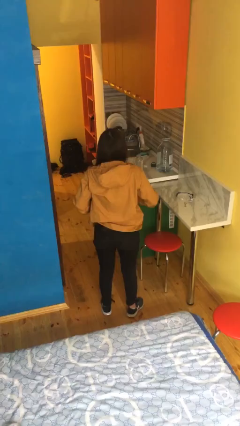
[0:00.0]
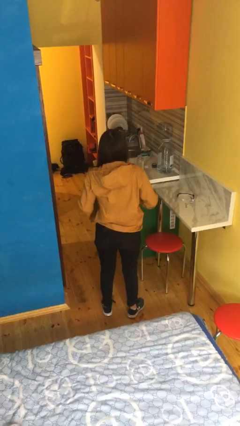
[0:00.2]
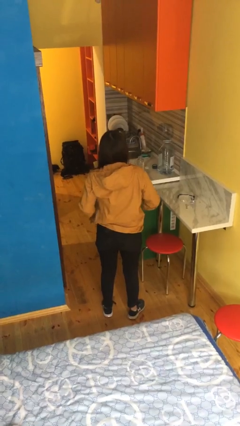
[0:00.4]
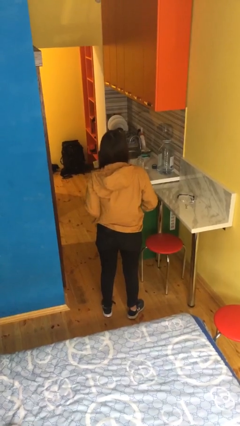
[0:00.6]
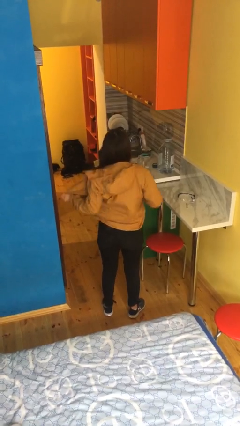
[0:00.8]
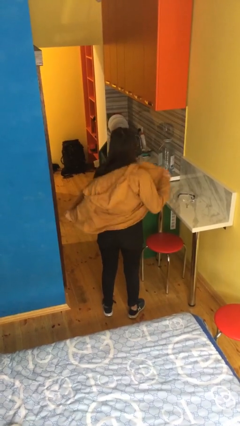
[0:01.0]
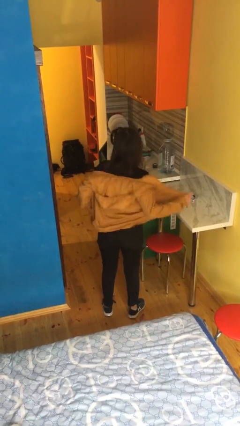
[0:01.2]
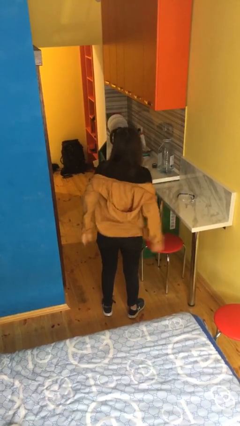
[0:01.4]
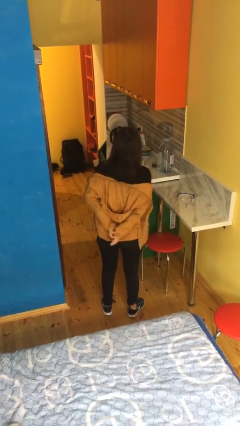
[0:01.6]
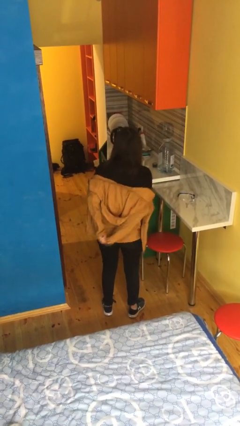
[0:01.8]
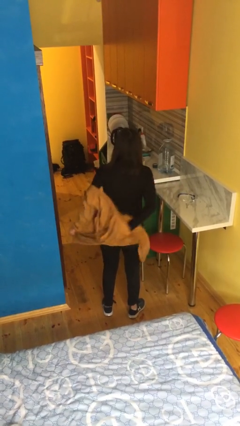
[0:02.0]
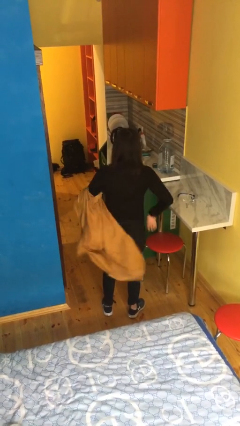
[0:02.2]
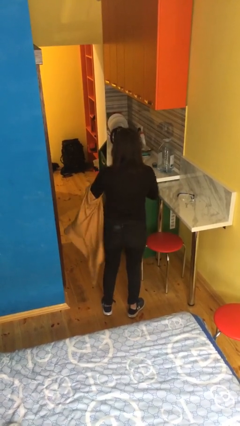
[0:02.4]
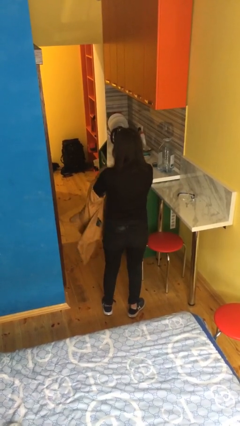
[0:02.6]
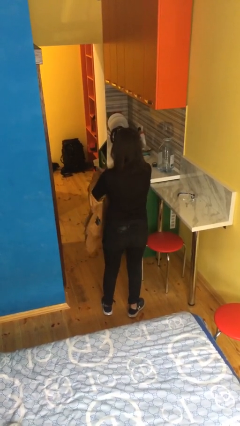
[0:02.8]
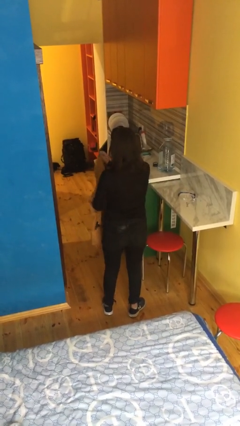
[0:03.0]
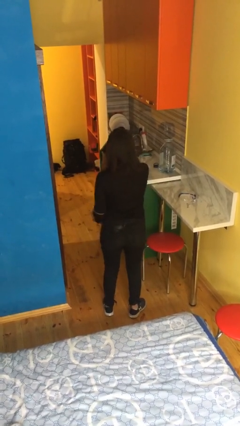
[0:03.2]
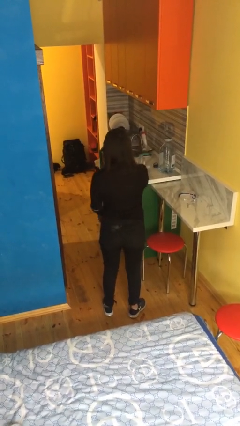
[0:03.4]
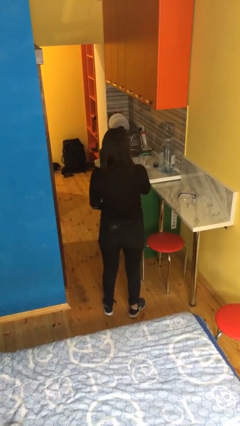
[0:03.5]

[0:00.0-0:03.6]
person takes off jacket

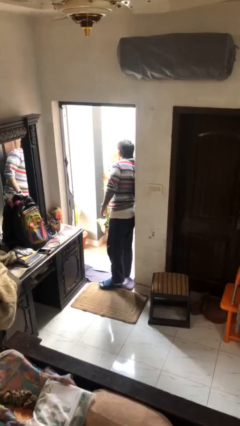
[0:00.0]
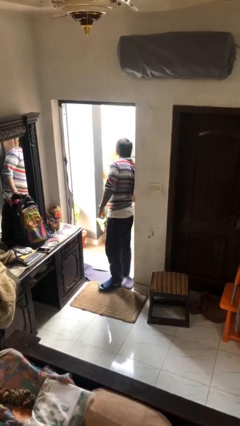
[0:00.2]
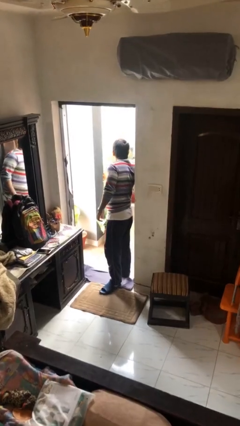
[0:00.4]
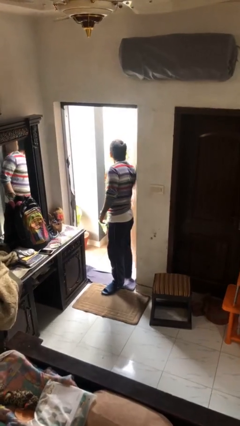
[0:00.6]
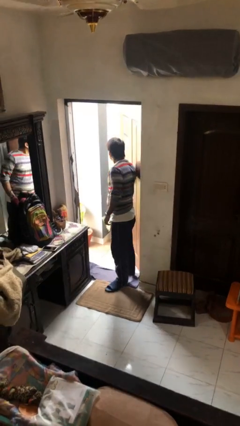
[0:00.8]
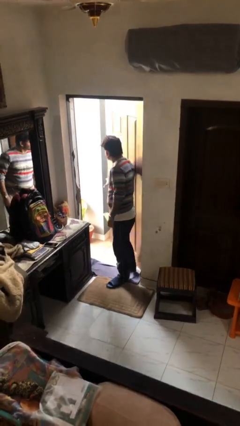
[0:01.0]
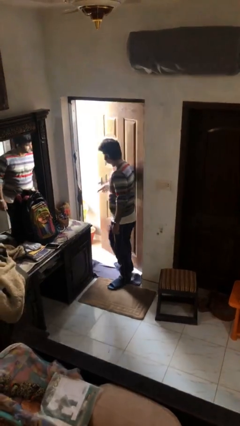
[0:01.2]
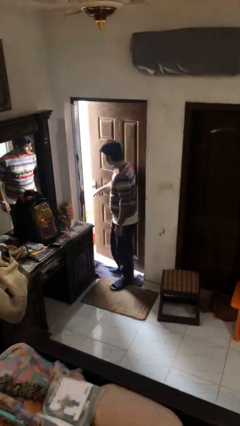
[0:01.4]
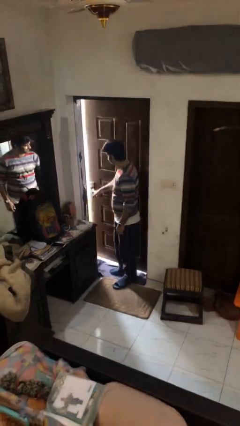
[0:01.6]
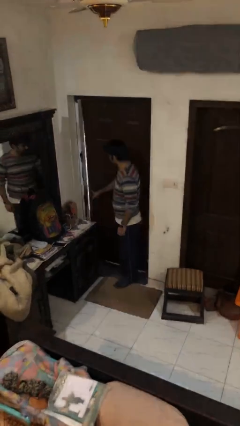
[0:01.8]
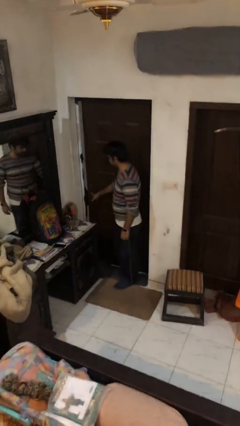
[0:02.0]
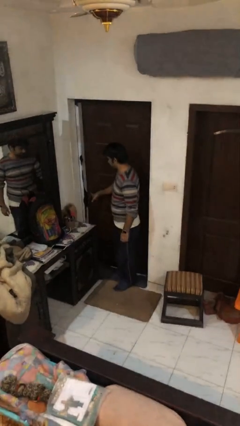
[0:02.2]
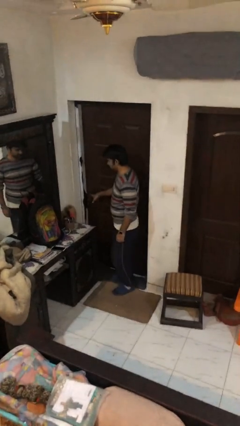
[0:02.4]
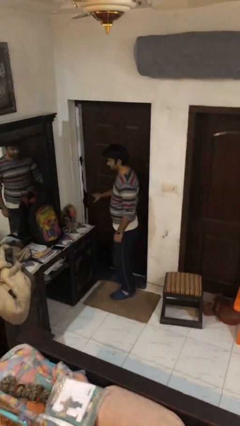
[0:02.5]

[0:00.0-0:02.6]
person closes facility door

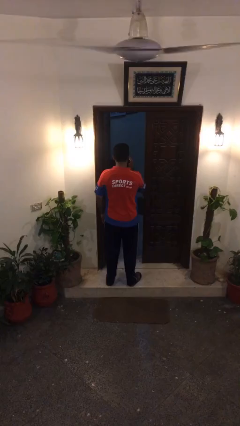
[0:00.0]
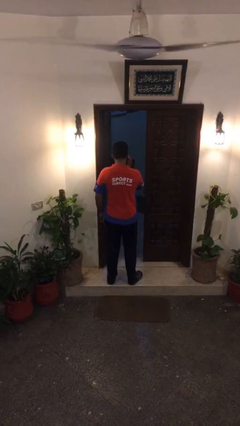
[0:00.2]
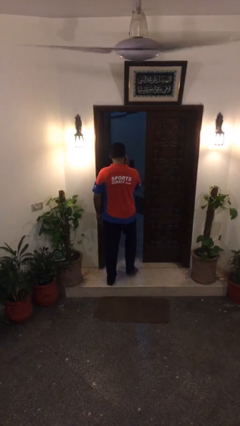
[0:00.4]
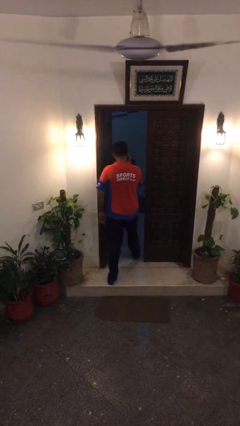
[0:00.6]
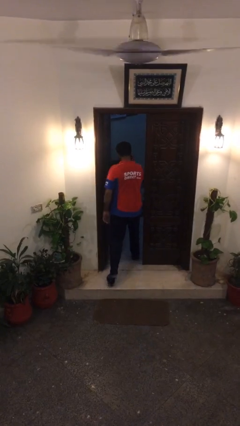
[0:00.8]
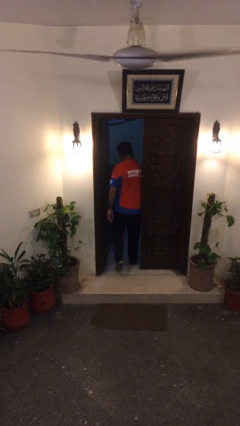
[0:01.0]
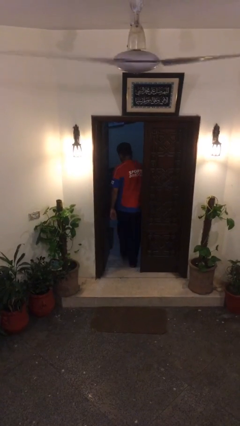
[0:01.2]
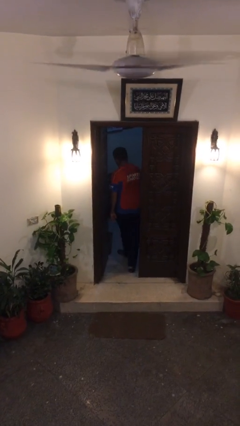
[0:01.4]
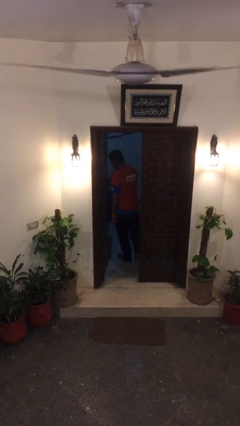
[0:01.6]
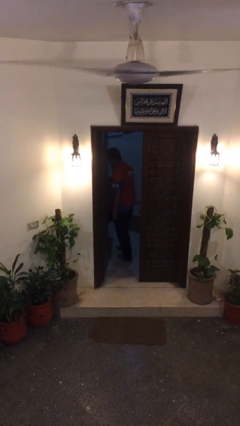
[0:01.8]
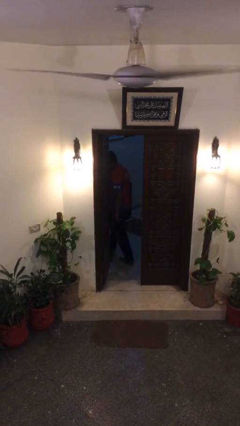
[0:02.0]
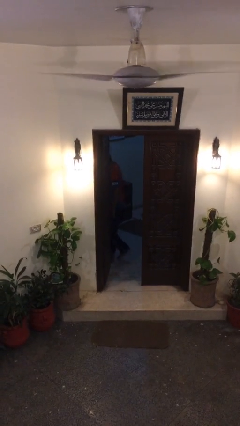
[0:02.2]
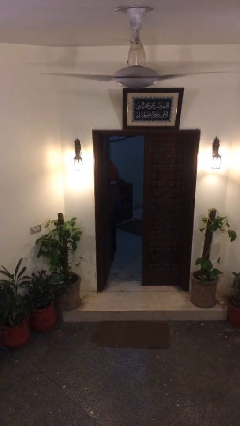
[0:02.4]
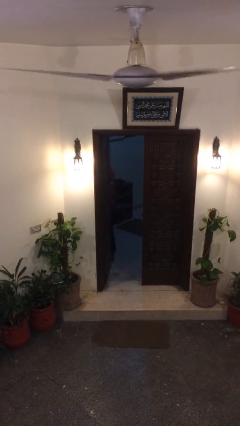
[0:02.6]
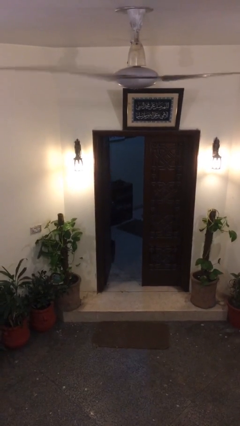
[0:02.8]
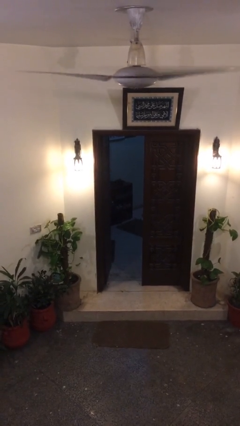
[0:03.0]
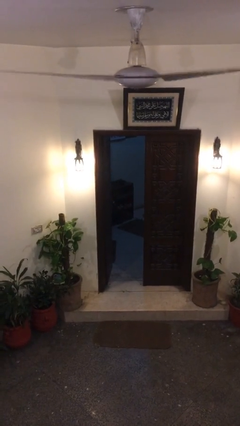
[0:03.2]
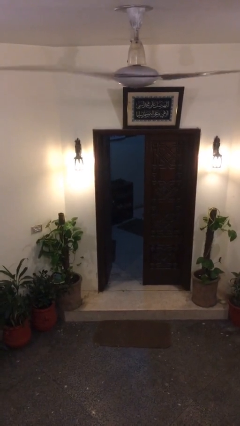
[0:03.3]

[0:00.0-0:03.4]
person exits scene through structure

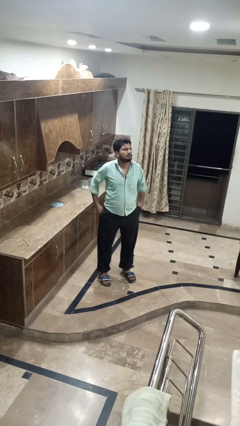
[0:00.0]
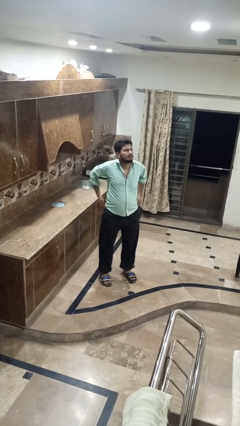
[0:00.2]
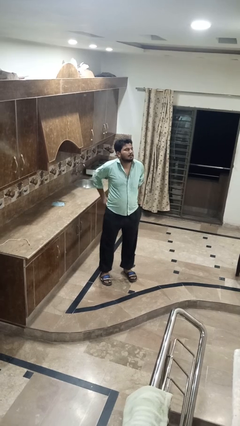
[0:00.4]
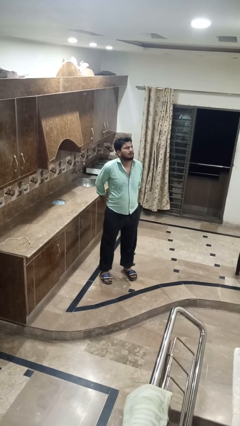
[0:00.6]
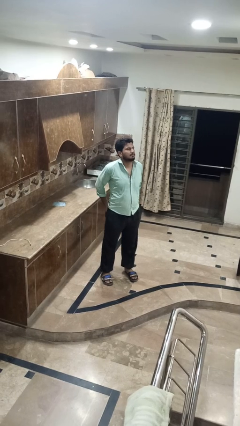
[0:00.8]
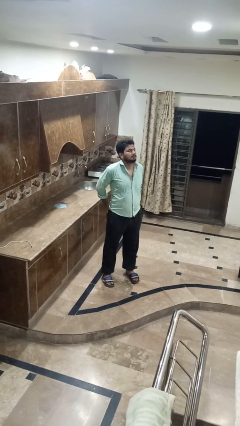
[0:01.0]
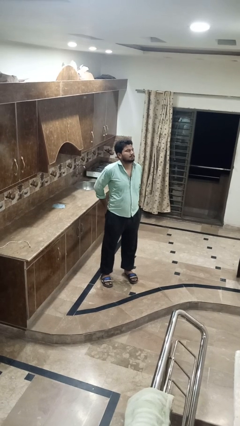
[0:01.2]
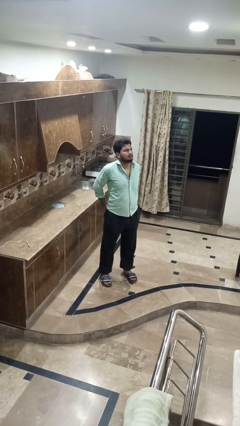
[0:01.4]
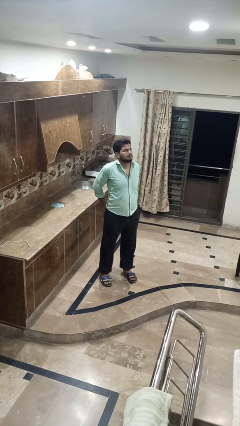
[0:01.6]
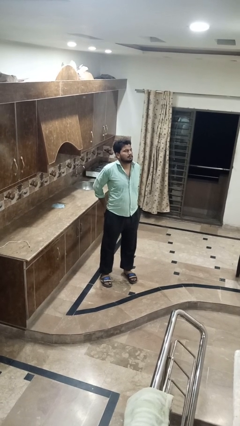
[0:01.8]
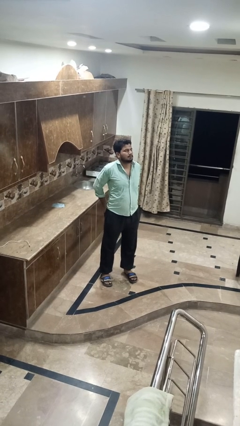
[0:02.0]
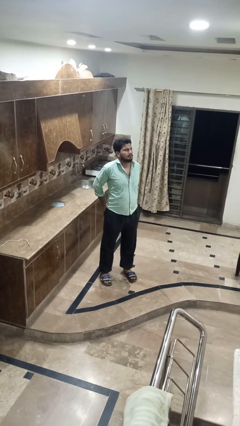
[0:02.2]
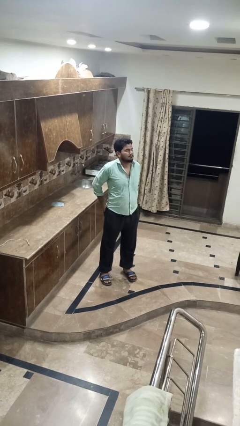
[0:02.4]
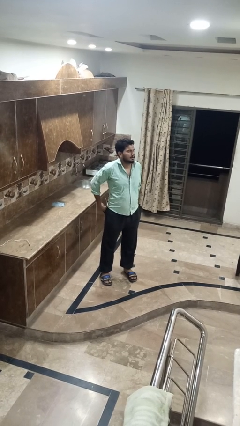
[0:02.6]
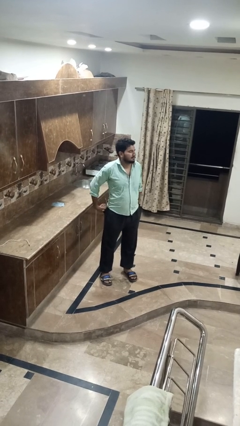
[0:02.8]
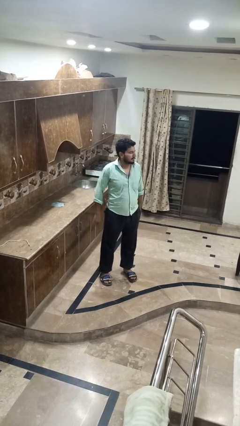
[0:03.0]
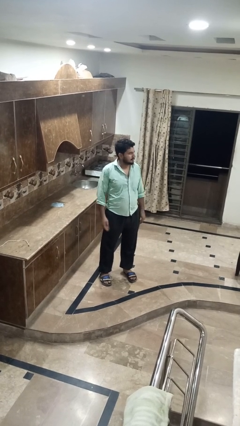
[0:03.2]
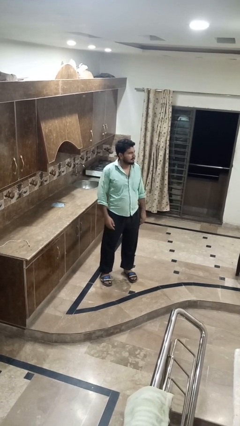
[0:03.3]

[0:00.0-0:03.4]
person puts hands in back pockets

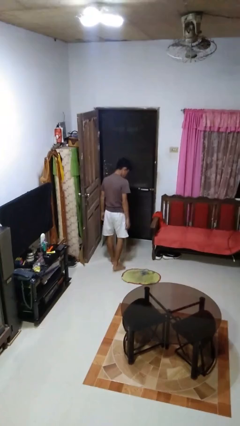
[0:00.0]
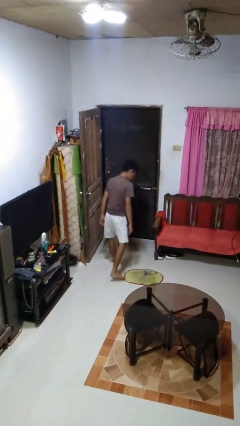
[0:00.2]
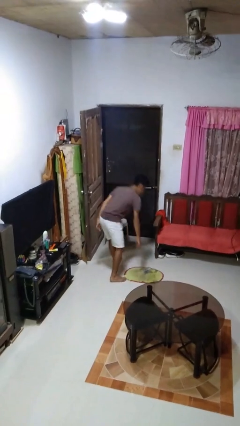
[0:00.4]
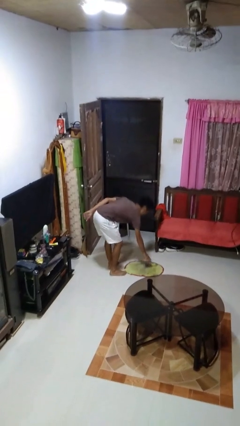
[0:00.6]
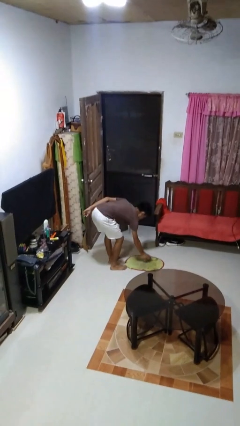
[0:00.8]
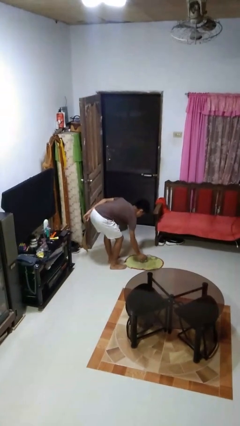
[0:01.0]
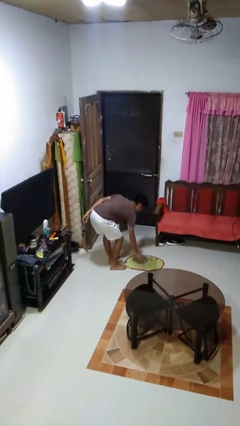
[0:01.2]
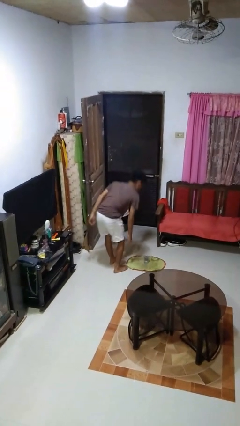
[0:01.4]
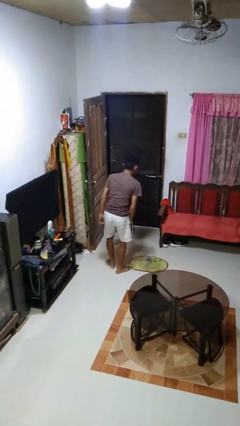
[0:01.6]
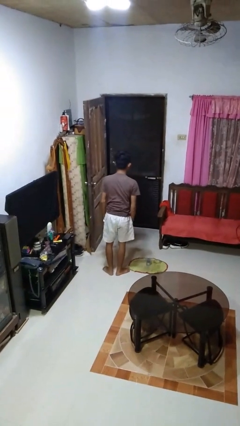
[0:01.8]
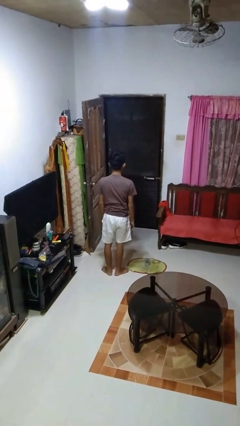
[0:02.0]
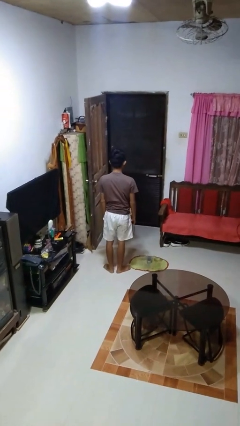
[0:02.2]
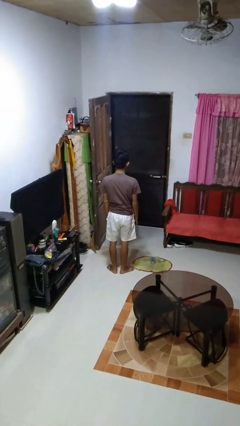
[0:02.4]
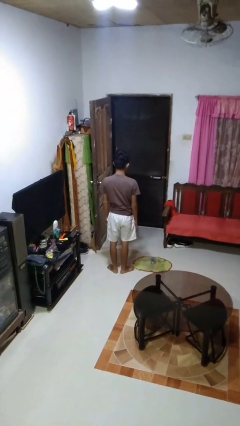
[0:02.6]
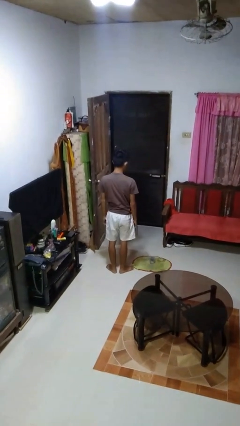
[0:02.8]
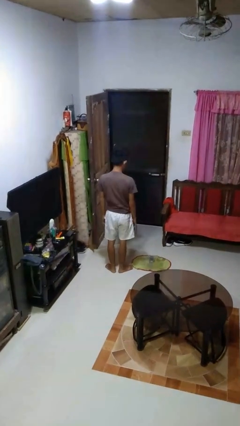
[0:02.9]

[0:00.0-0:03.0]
person sets upright glass

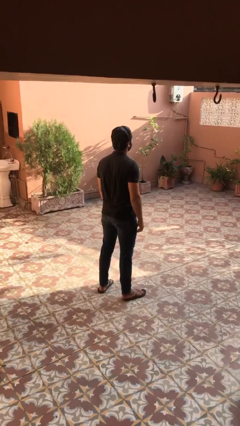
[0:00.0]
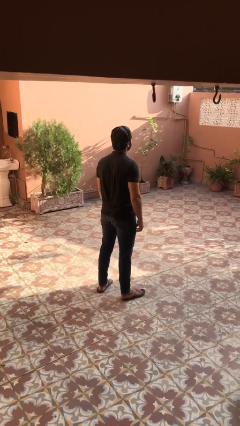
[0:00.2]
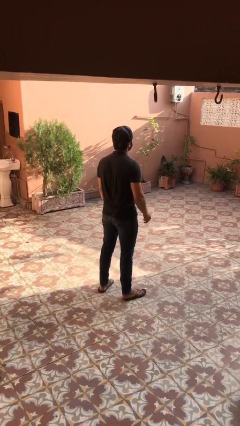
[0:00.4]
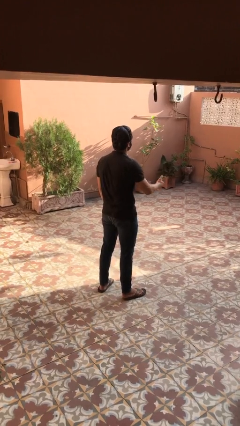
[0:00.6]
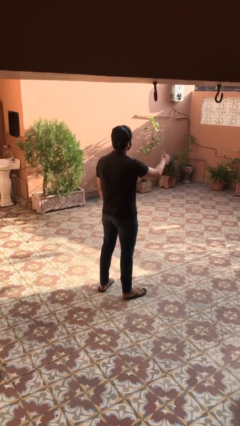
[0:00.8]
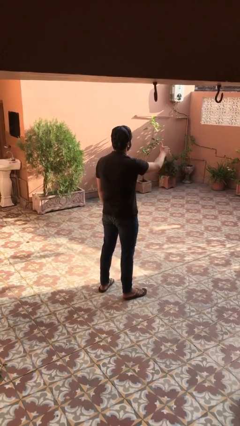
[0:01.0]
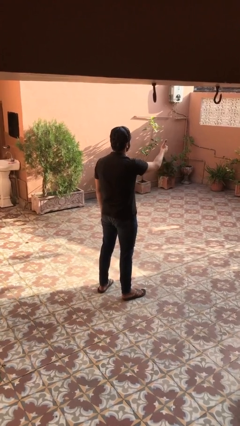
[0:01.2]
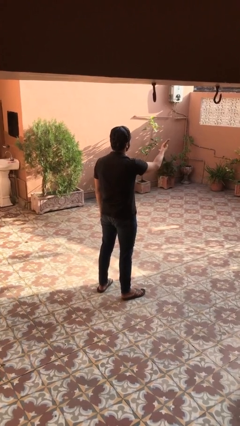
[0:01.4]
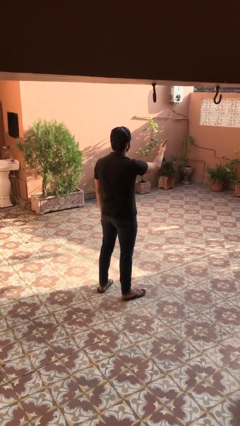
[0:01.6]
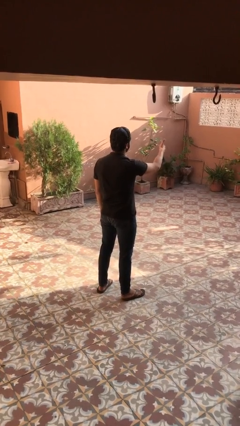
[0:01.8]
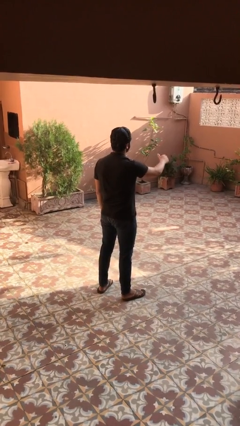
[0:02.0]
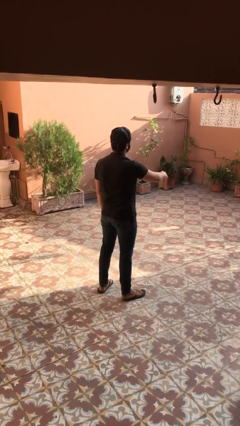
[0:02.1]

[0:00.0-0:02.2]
person gestures hang loose
